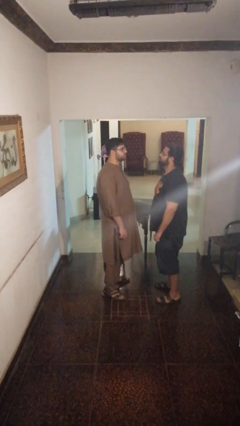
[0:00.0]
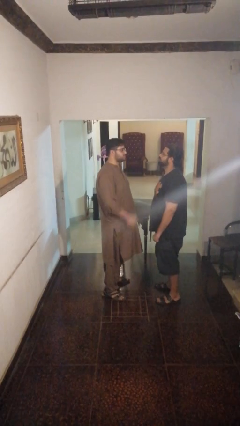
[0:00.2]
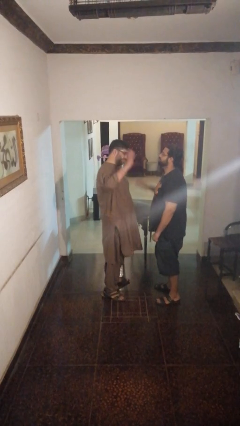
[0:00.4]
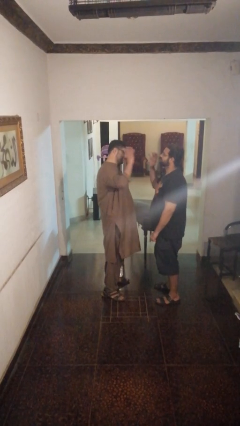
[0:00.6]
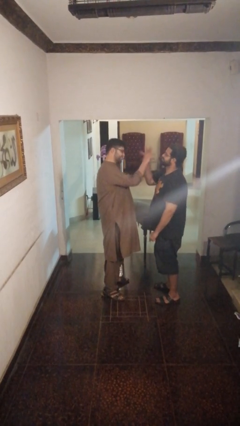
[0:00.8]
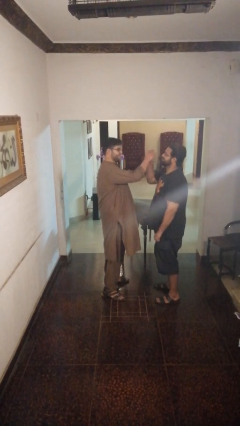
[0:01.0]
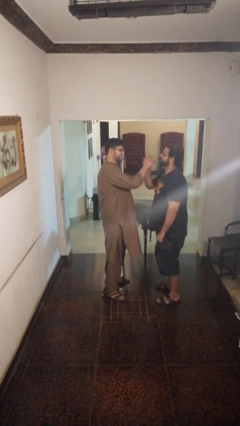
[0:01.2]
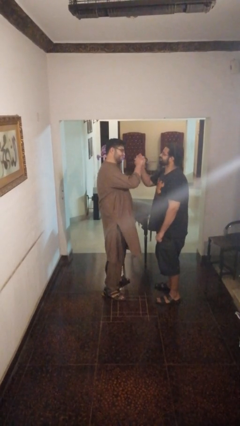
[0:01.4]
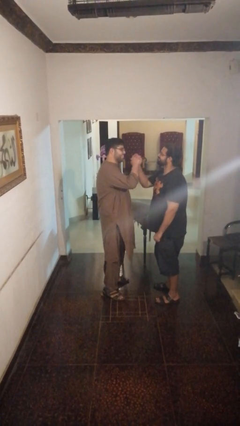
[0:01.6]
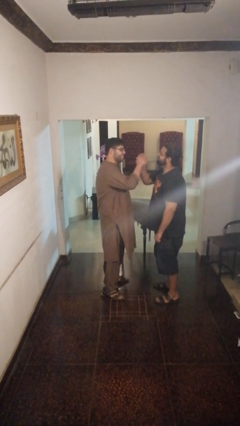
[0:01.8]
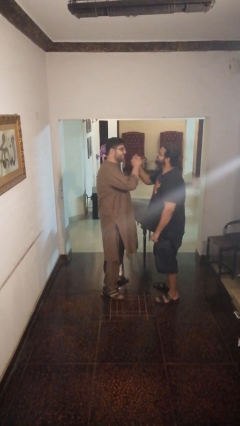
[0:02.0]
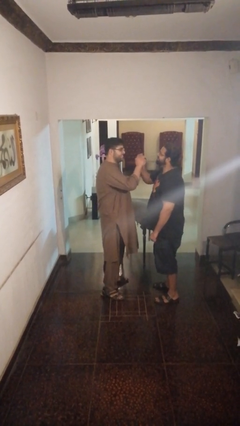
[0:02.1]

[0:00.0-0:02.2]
person highfives hand

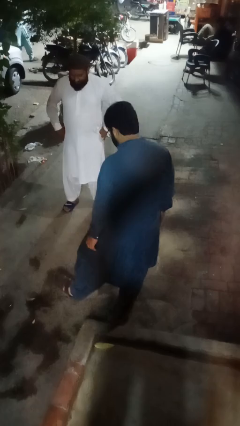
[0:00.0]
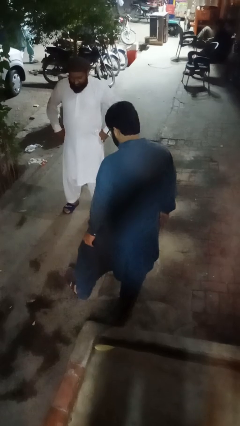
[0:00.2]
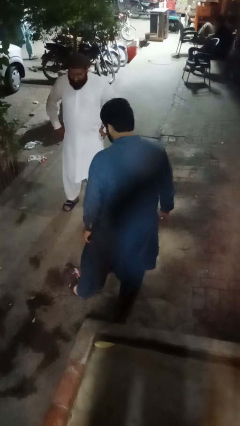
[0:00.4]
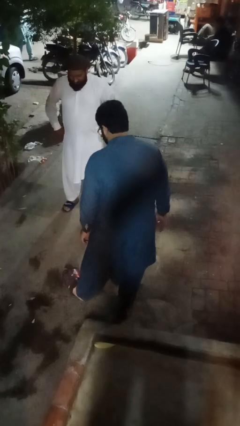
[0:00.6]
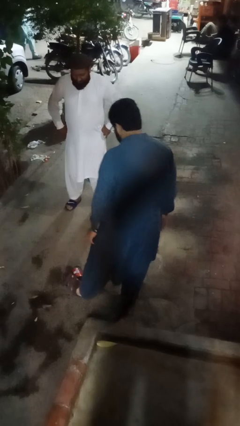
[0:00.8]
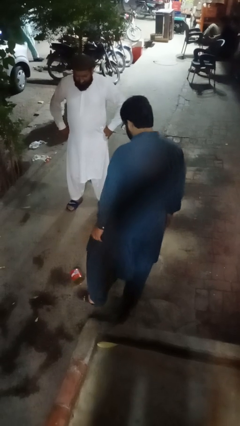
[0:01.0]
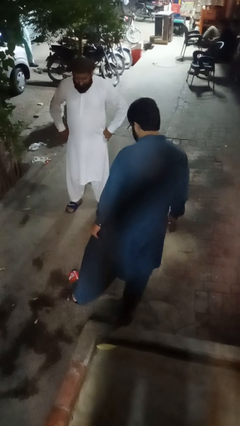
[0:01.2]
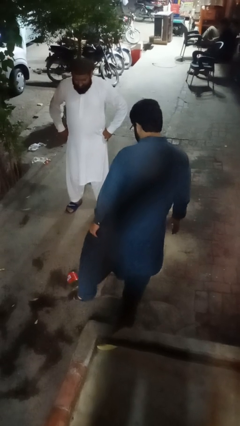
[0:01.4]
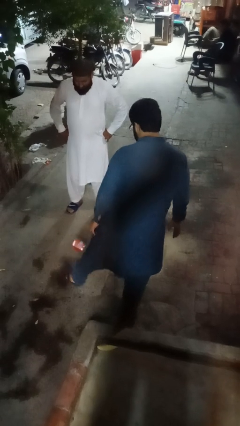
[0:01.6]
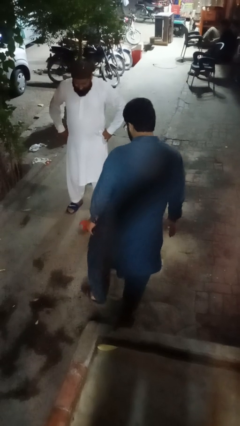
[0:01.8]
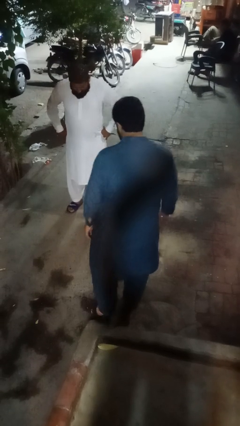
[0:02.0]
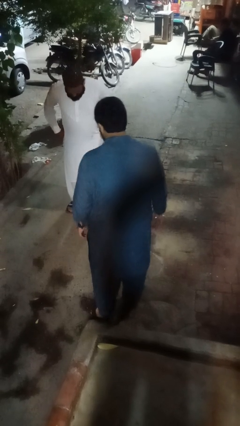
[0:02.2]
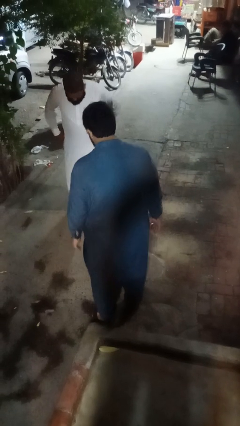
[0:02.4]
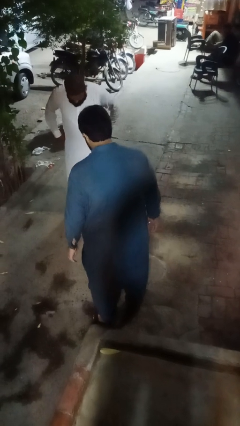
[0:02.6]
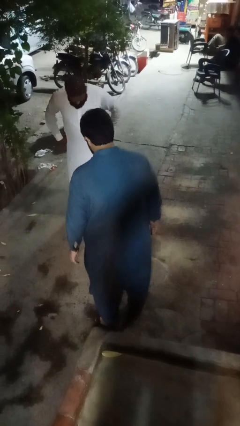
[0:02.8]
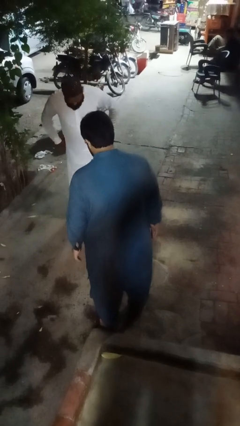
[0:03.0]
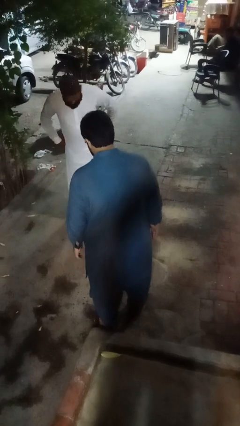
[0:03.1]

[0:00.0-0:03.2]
person kicks object to person

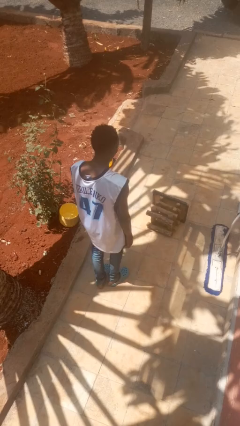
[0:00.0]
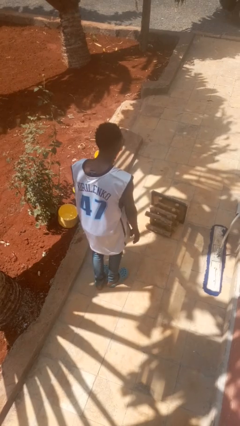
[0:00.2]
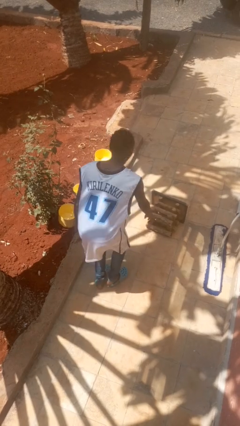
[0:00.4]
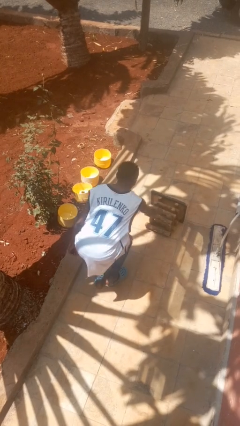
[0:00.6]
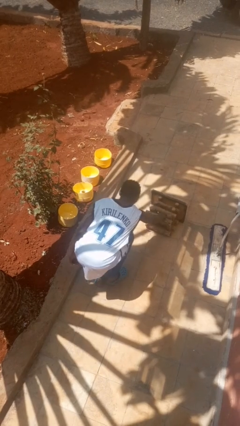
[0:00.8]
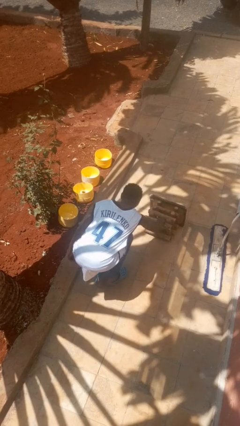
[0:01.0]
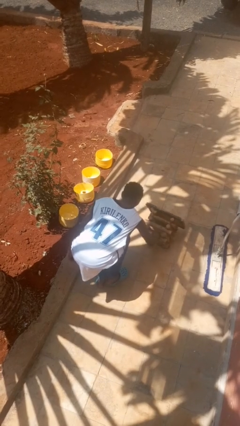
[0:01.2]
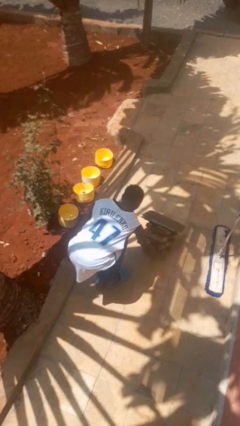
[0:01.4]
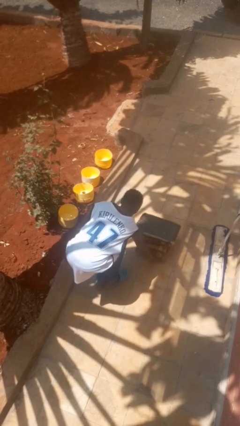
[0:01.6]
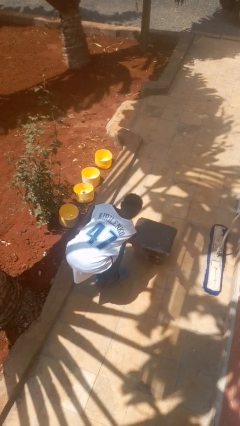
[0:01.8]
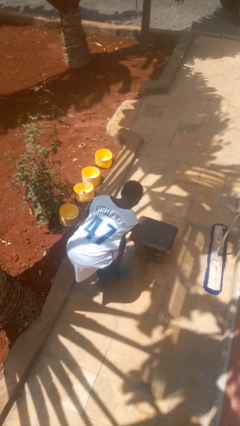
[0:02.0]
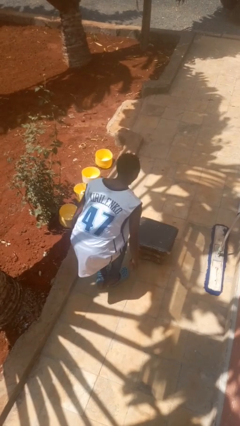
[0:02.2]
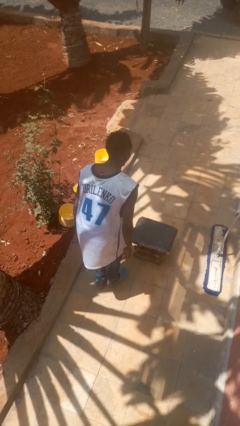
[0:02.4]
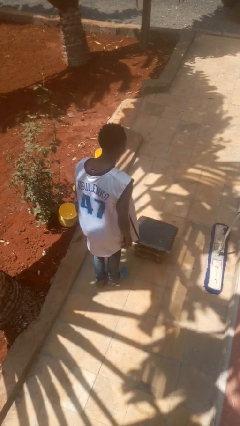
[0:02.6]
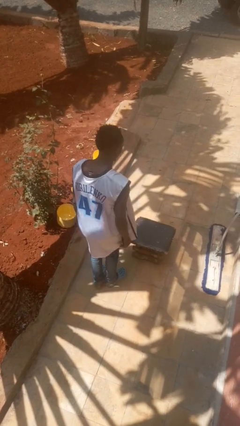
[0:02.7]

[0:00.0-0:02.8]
person sets upright furniture

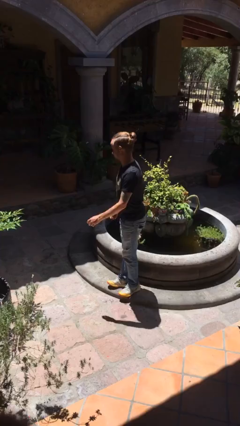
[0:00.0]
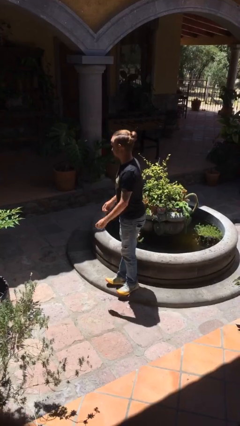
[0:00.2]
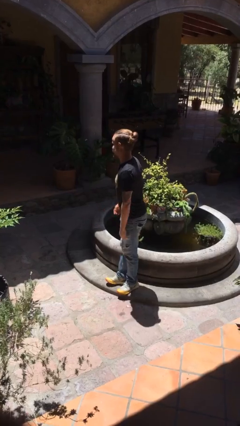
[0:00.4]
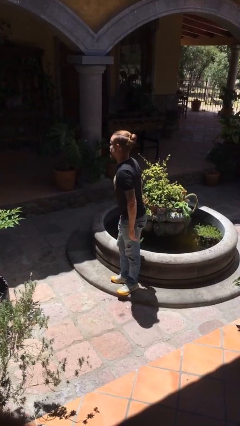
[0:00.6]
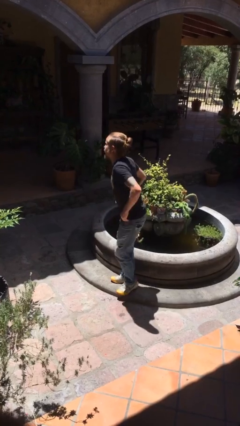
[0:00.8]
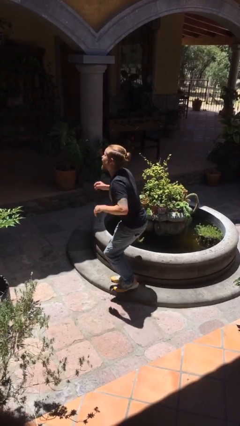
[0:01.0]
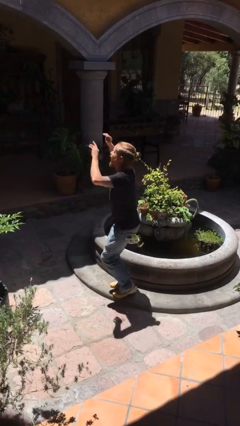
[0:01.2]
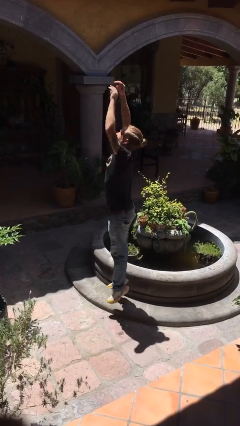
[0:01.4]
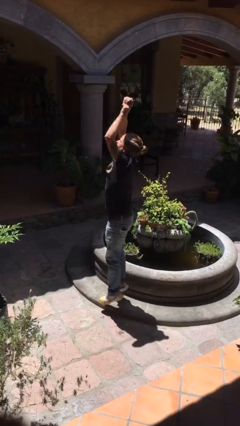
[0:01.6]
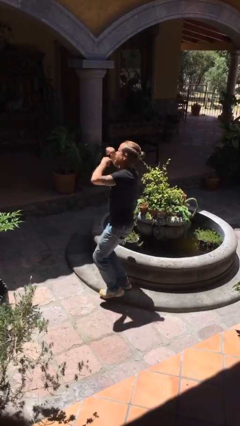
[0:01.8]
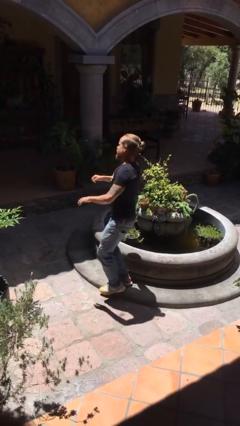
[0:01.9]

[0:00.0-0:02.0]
person jumps

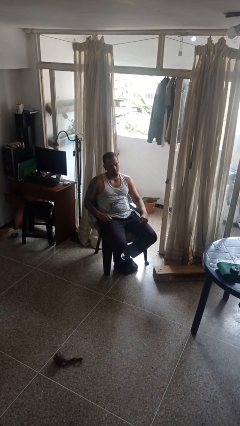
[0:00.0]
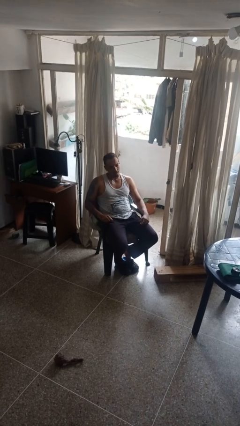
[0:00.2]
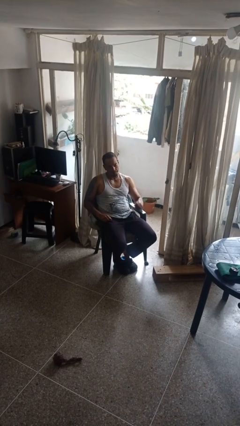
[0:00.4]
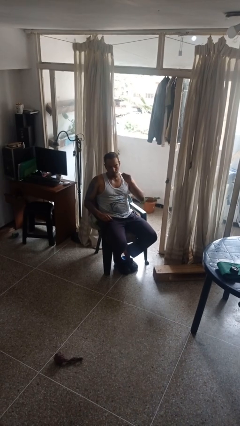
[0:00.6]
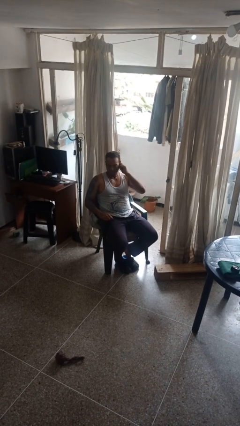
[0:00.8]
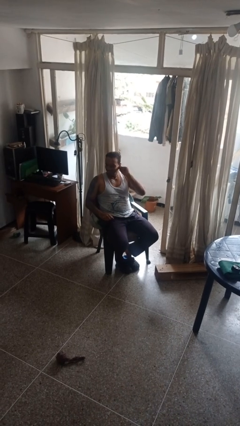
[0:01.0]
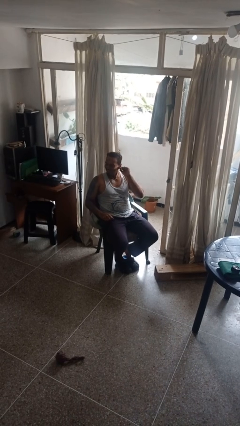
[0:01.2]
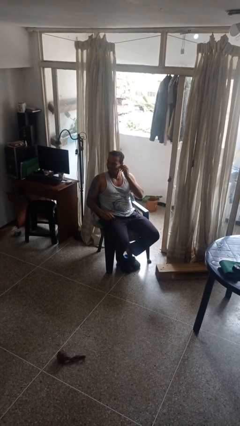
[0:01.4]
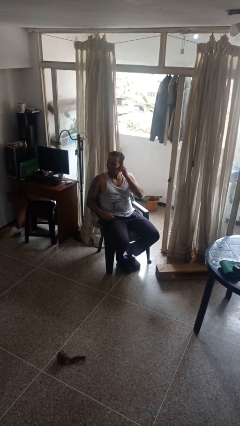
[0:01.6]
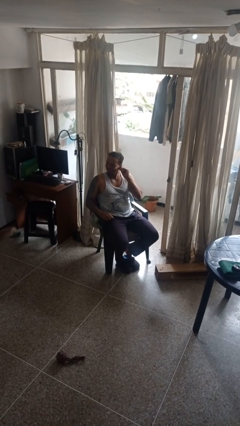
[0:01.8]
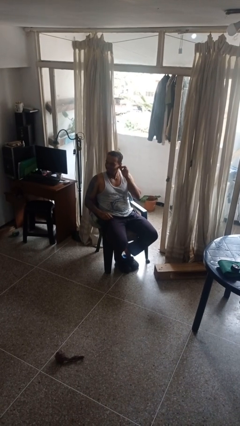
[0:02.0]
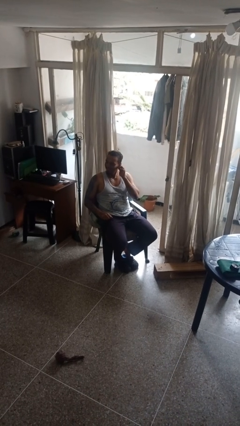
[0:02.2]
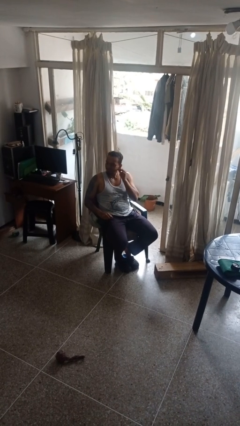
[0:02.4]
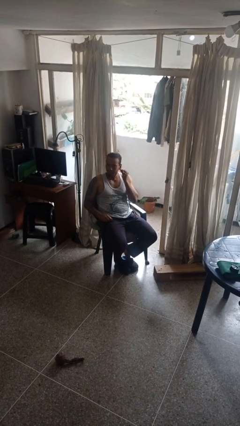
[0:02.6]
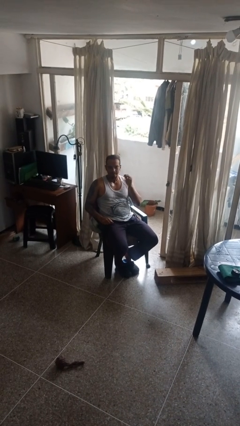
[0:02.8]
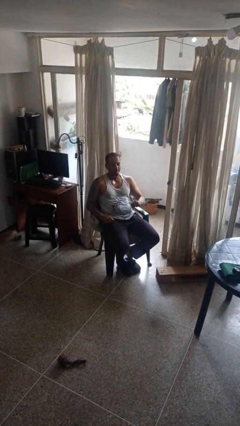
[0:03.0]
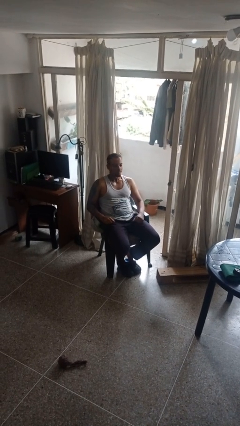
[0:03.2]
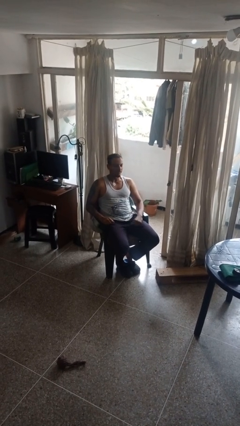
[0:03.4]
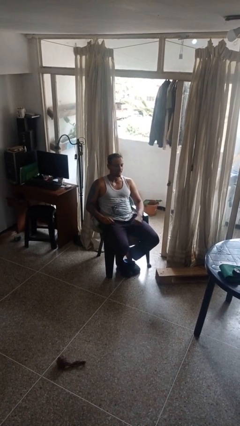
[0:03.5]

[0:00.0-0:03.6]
person touches earlobe

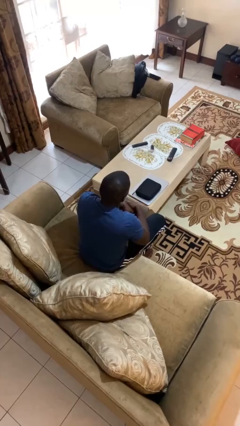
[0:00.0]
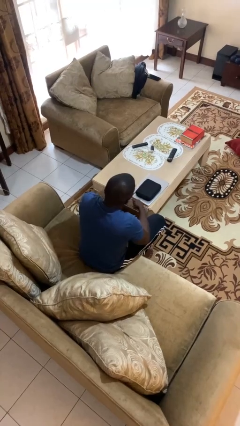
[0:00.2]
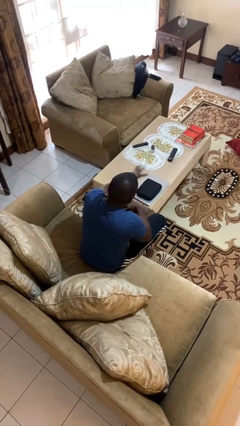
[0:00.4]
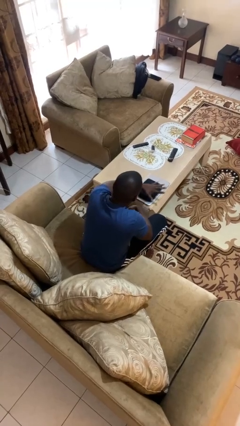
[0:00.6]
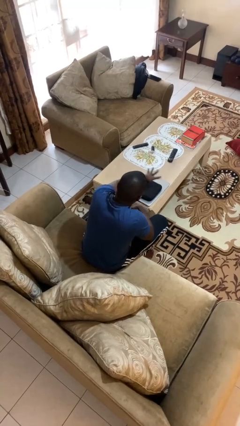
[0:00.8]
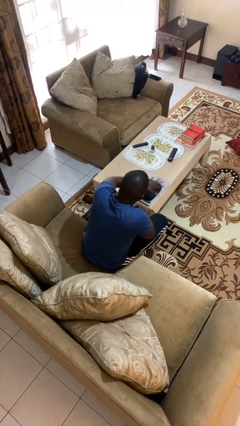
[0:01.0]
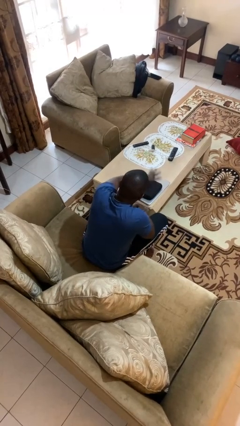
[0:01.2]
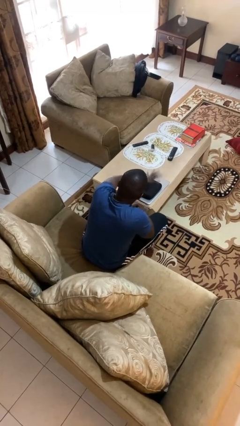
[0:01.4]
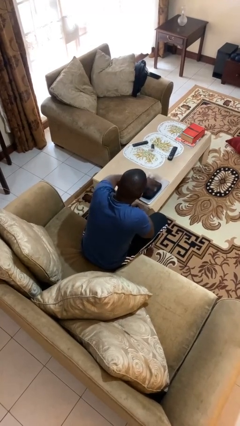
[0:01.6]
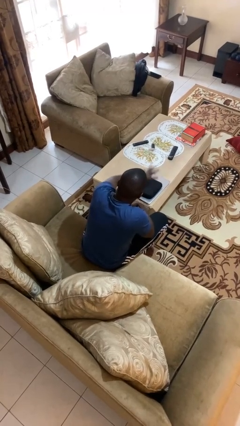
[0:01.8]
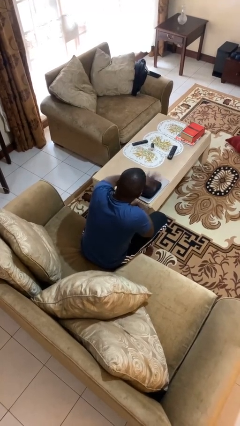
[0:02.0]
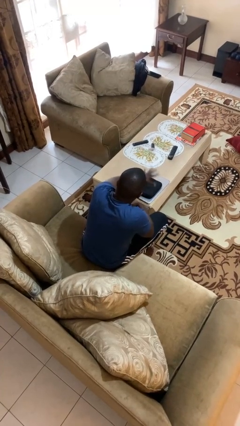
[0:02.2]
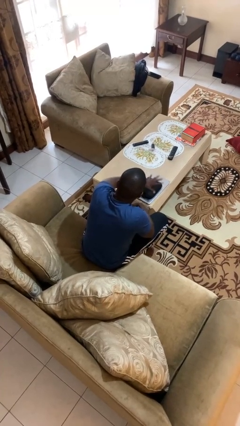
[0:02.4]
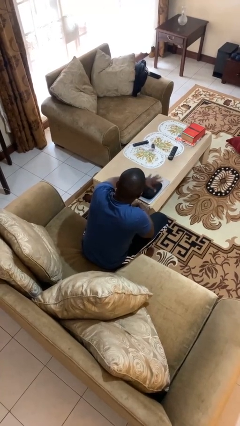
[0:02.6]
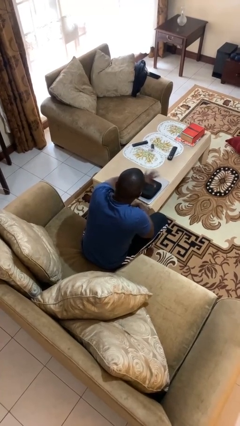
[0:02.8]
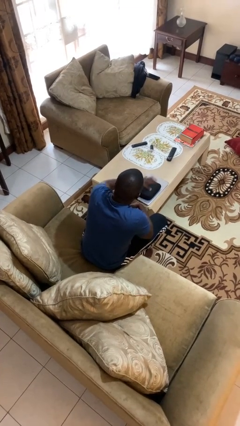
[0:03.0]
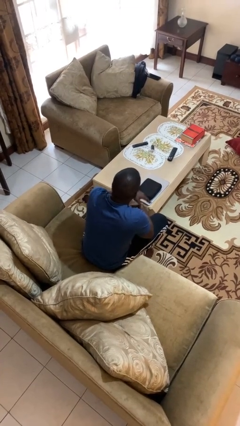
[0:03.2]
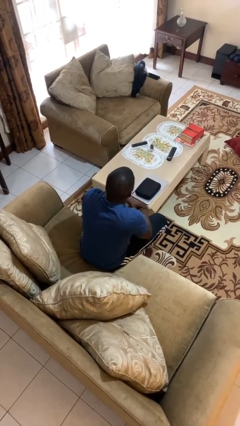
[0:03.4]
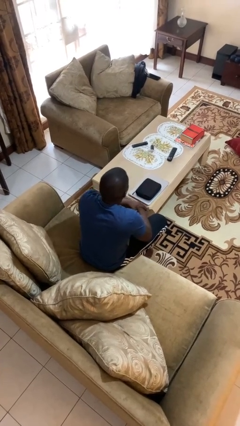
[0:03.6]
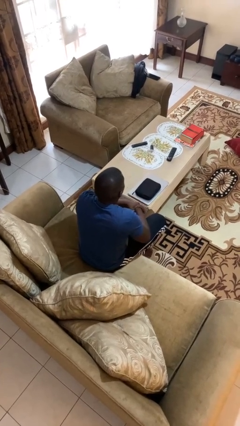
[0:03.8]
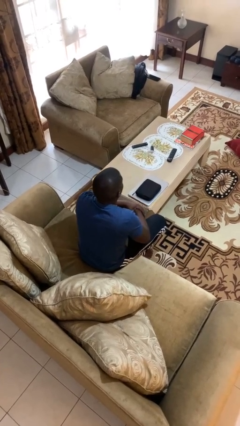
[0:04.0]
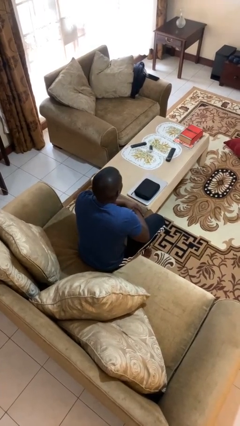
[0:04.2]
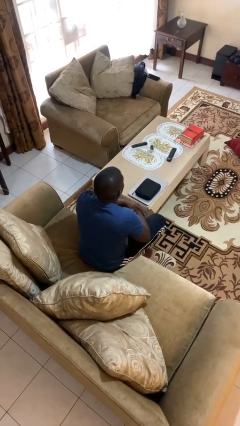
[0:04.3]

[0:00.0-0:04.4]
person waves hand over object
